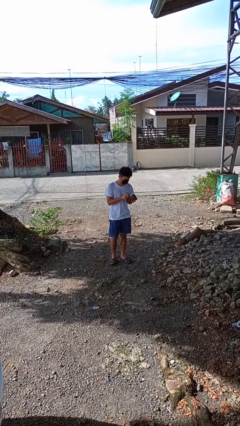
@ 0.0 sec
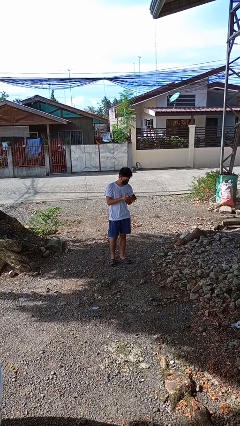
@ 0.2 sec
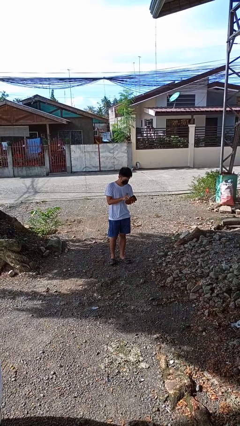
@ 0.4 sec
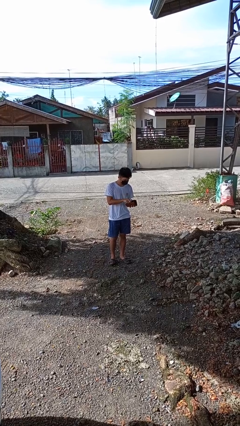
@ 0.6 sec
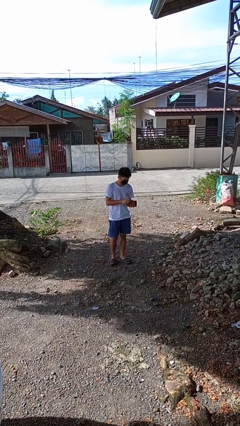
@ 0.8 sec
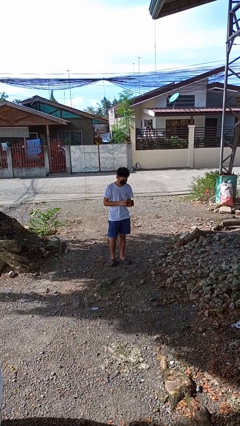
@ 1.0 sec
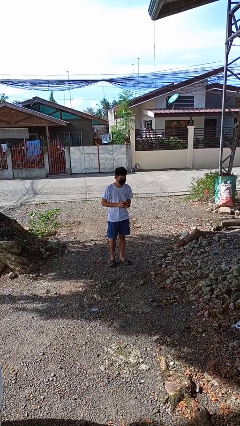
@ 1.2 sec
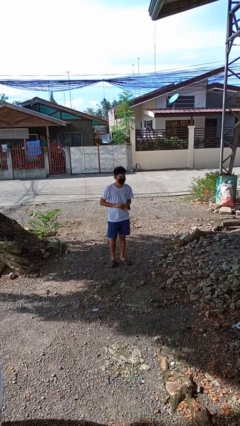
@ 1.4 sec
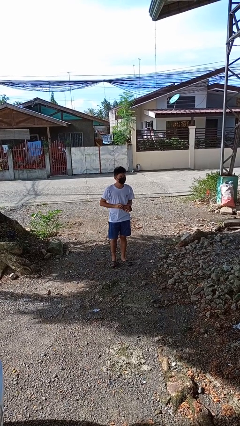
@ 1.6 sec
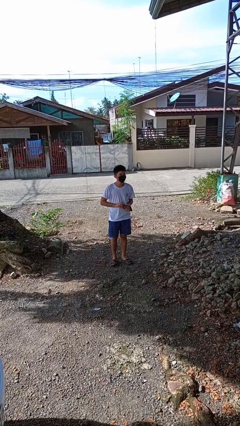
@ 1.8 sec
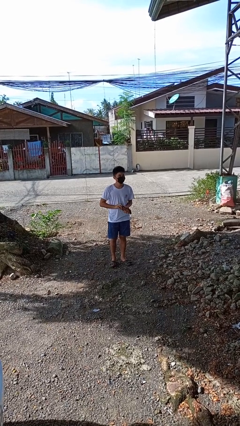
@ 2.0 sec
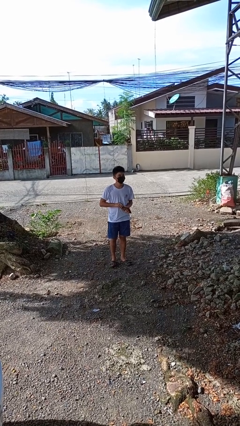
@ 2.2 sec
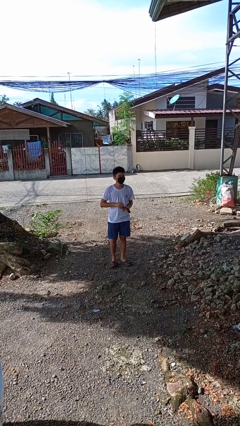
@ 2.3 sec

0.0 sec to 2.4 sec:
person puts object into purse

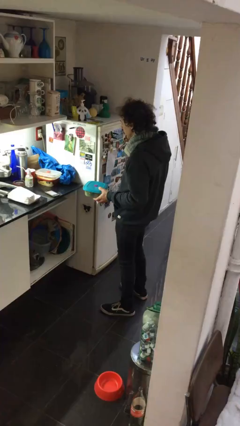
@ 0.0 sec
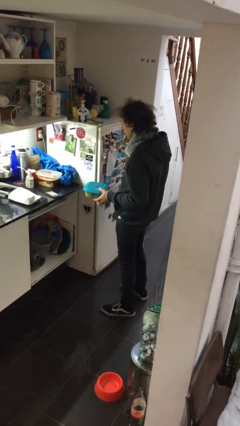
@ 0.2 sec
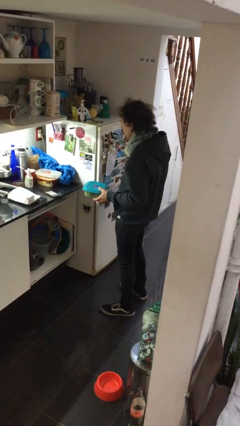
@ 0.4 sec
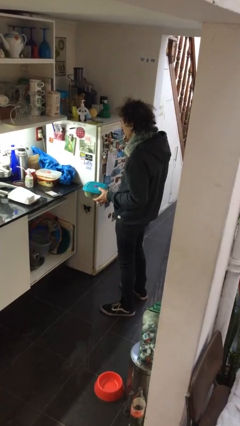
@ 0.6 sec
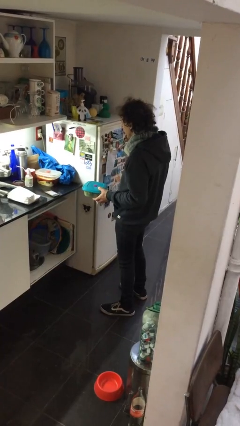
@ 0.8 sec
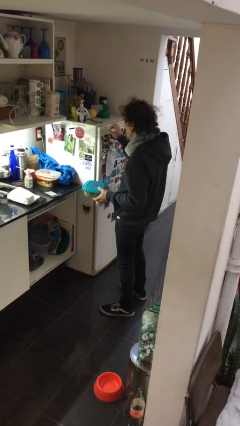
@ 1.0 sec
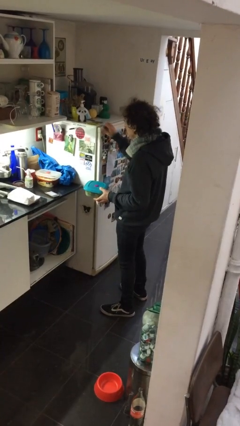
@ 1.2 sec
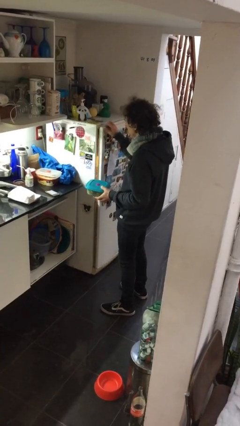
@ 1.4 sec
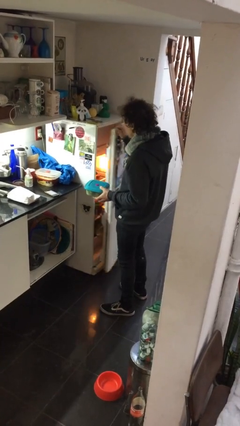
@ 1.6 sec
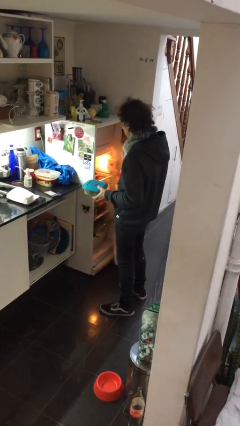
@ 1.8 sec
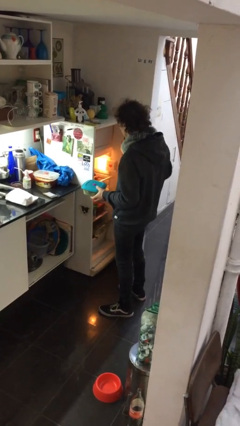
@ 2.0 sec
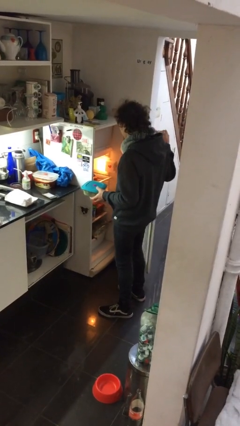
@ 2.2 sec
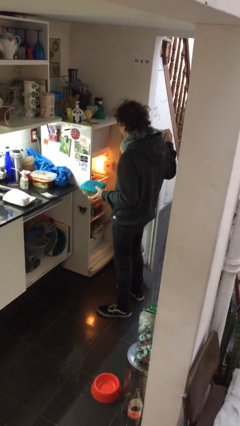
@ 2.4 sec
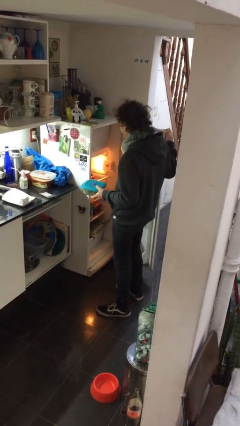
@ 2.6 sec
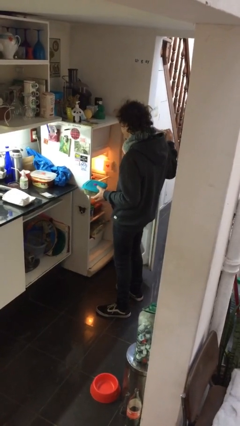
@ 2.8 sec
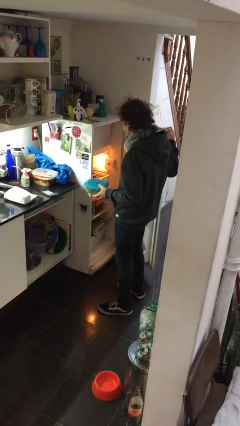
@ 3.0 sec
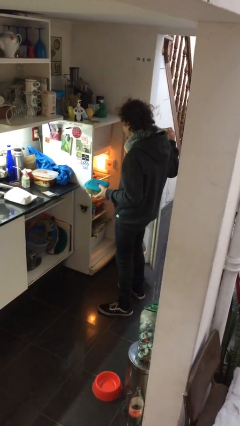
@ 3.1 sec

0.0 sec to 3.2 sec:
person opens refrigerator

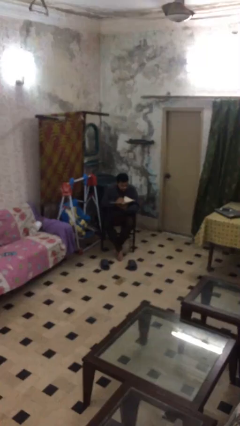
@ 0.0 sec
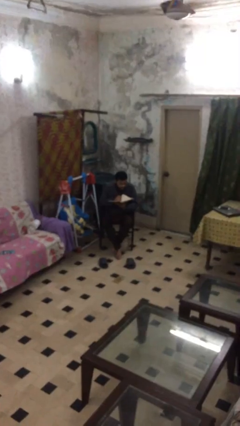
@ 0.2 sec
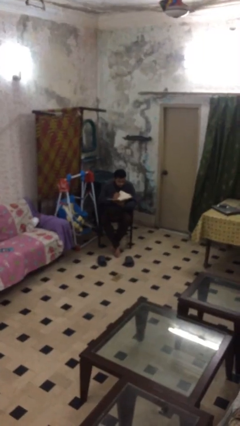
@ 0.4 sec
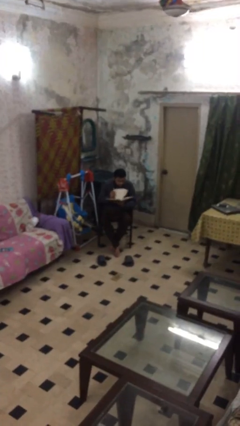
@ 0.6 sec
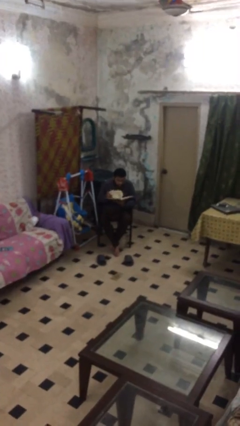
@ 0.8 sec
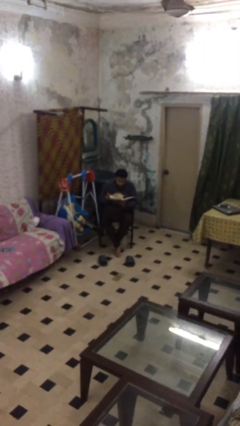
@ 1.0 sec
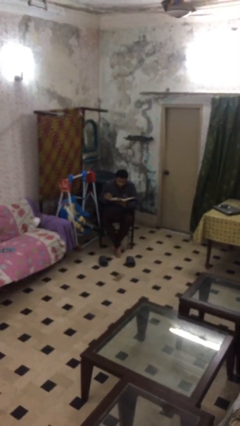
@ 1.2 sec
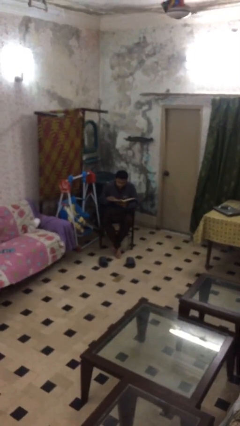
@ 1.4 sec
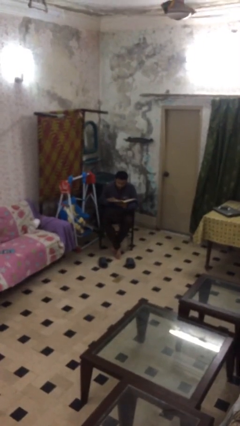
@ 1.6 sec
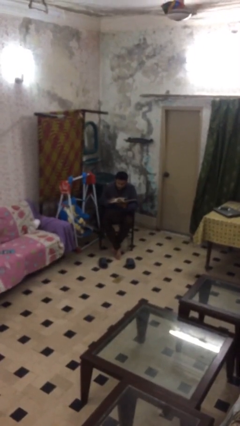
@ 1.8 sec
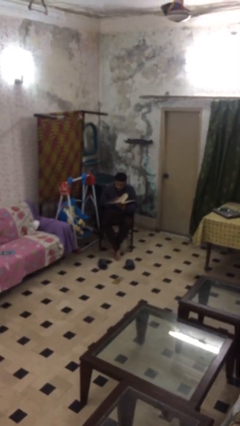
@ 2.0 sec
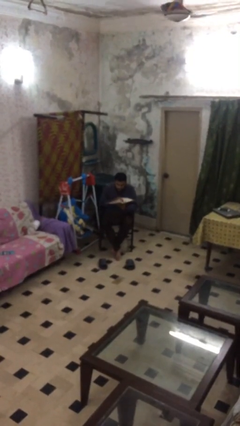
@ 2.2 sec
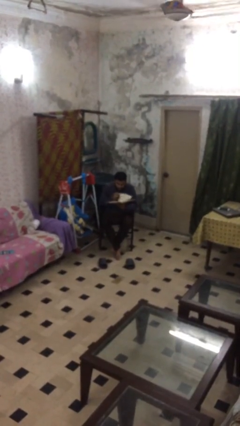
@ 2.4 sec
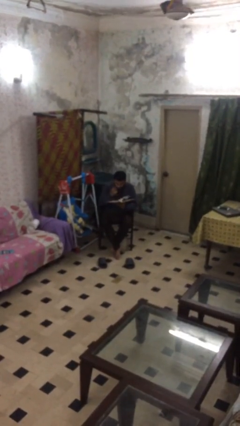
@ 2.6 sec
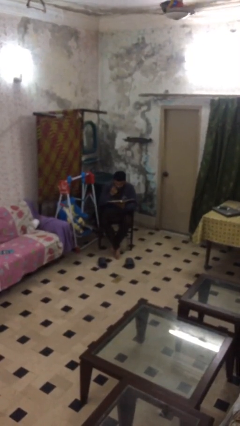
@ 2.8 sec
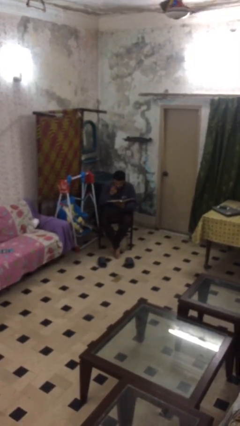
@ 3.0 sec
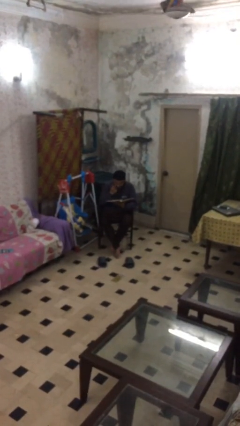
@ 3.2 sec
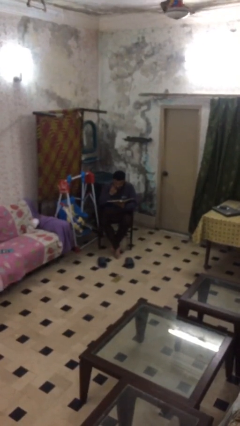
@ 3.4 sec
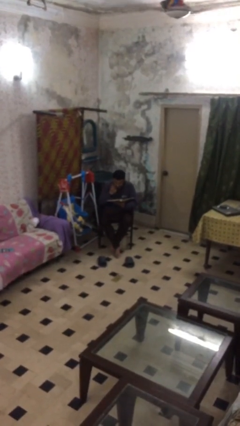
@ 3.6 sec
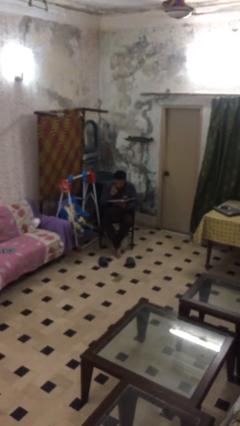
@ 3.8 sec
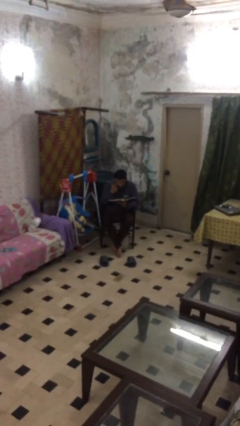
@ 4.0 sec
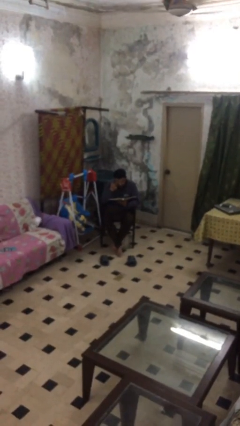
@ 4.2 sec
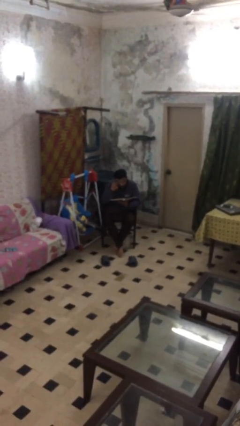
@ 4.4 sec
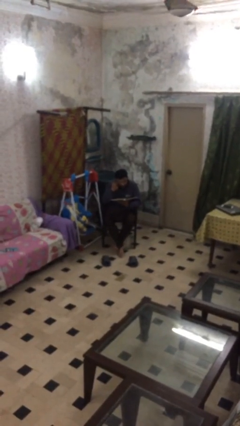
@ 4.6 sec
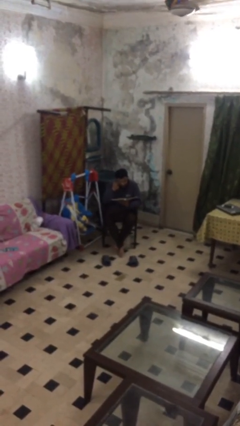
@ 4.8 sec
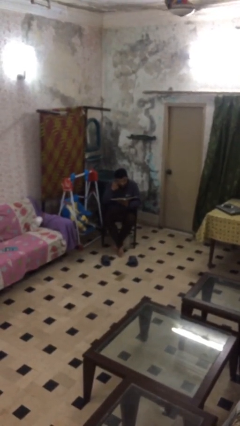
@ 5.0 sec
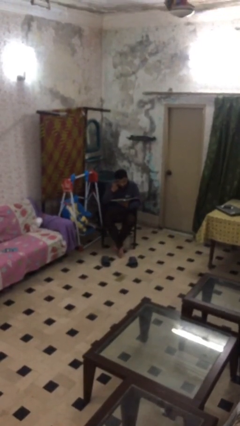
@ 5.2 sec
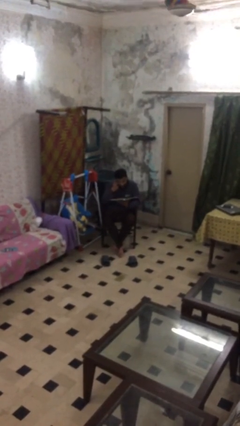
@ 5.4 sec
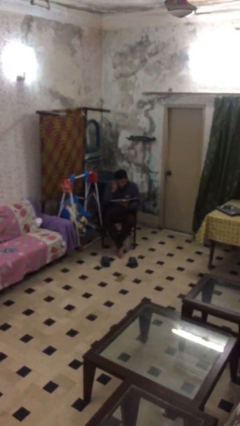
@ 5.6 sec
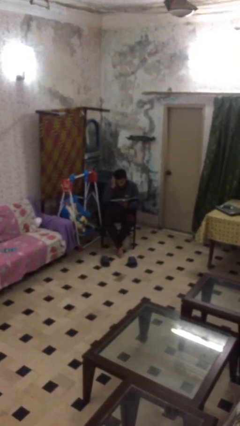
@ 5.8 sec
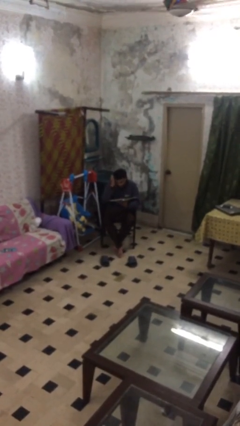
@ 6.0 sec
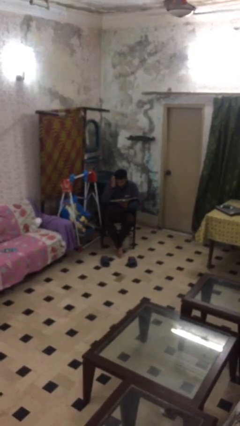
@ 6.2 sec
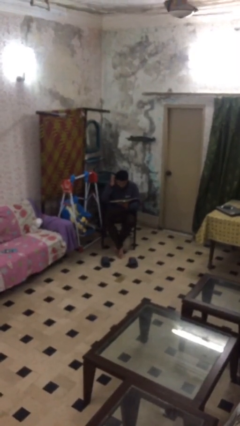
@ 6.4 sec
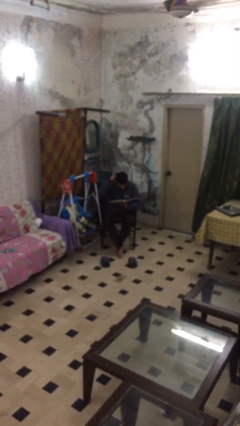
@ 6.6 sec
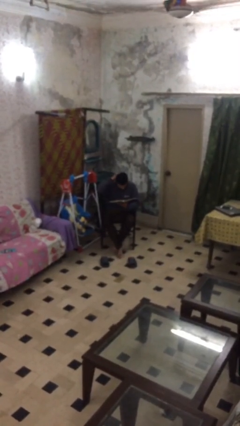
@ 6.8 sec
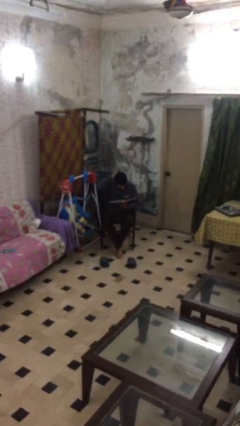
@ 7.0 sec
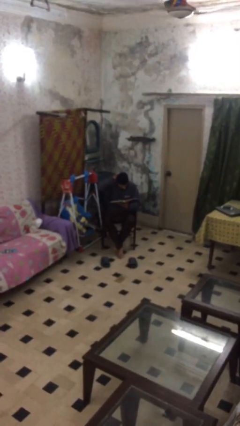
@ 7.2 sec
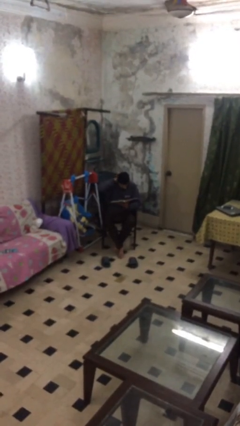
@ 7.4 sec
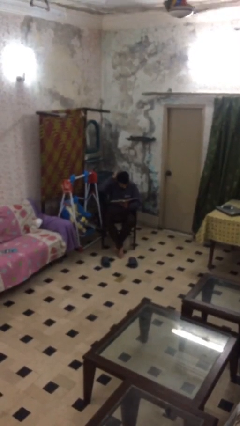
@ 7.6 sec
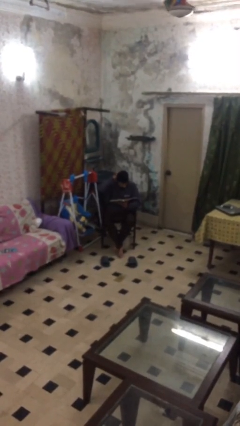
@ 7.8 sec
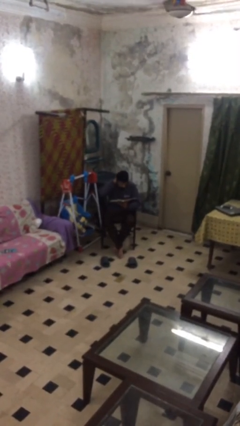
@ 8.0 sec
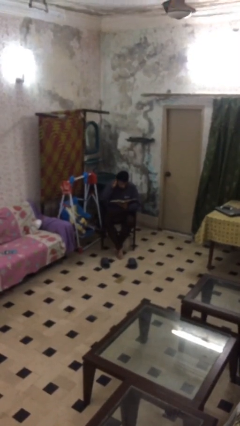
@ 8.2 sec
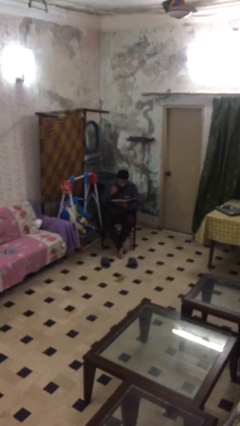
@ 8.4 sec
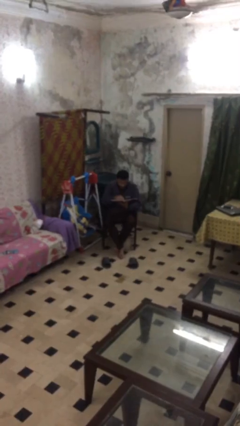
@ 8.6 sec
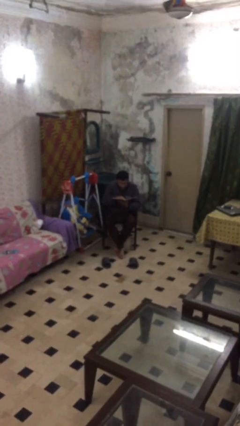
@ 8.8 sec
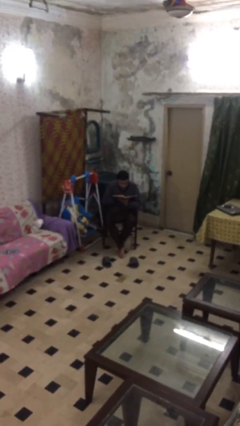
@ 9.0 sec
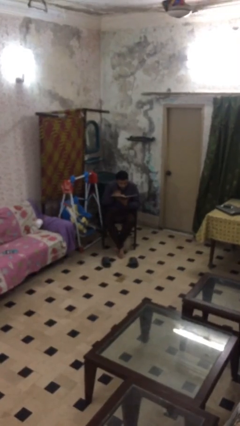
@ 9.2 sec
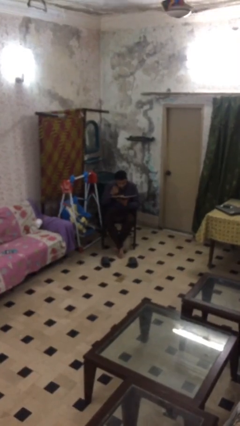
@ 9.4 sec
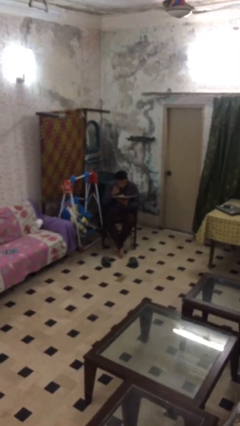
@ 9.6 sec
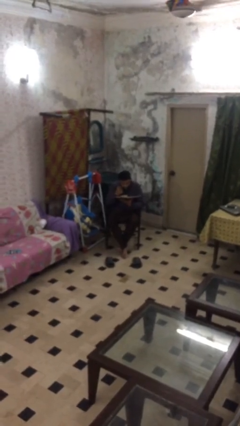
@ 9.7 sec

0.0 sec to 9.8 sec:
person reads document

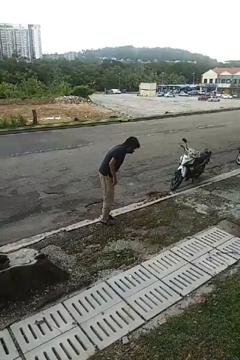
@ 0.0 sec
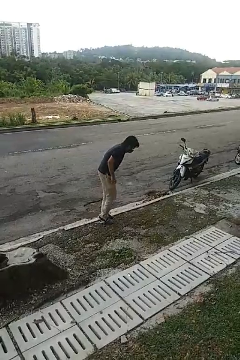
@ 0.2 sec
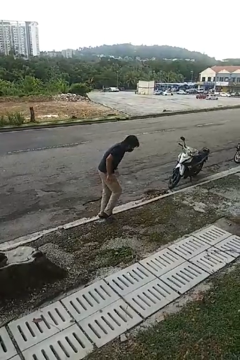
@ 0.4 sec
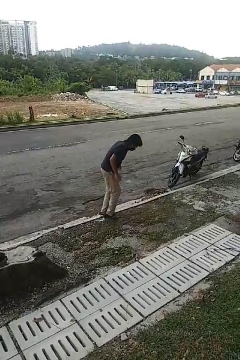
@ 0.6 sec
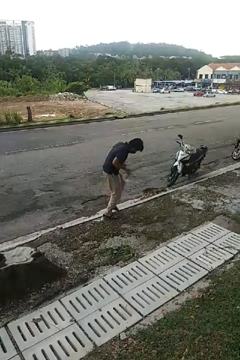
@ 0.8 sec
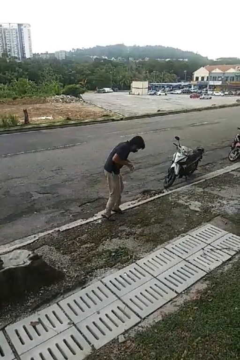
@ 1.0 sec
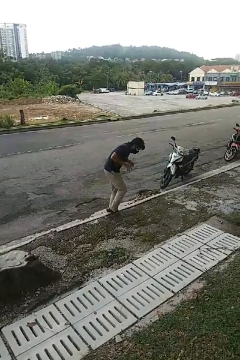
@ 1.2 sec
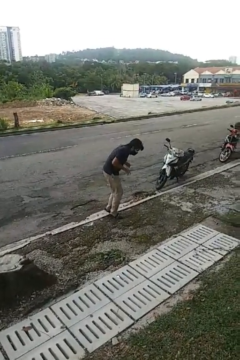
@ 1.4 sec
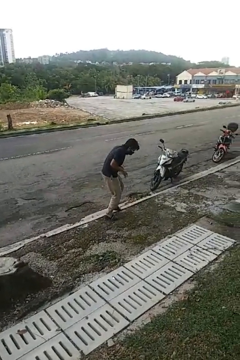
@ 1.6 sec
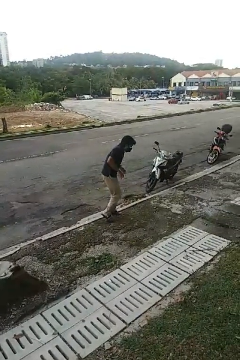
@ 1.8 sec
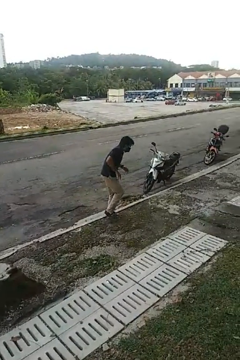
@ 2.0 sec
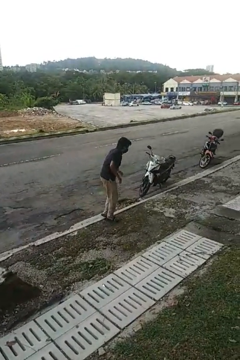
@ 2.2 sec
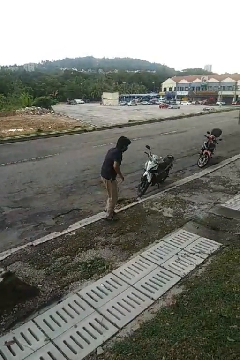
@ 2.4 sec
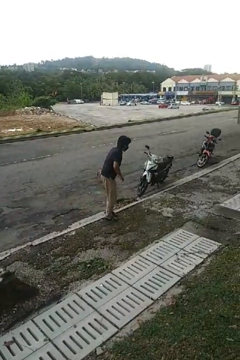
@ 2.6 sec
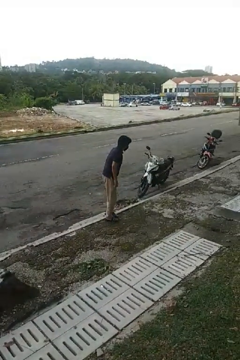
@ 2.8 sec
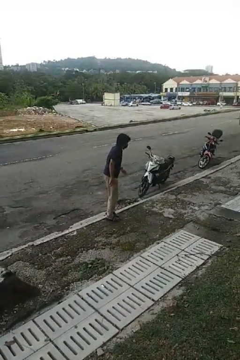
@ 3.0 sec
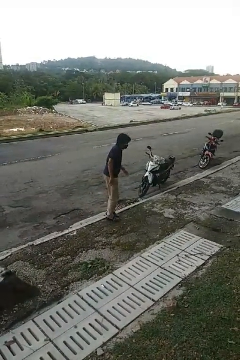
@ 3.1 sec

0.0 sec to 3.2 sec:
person walks tiptoe
